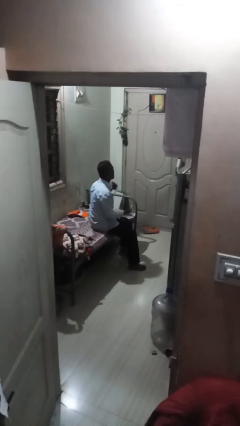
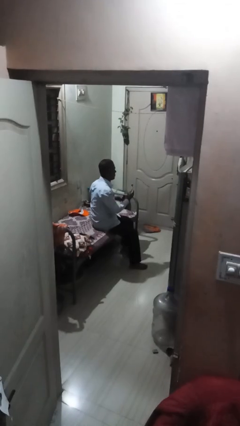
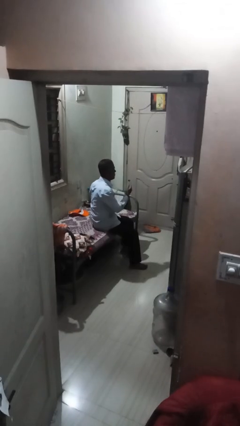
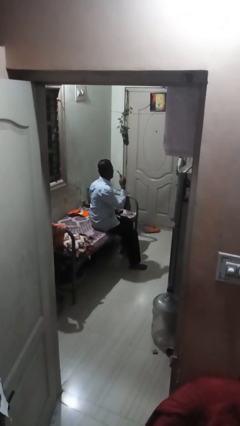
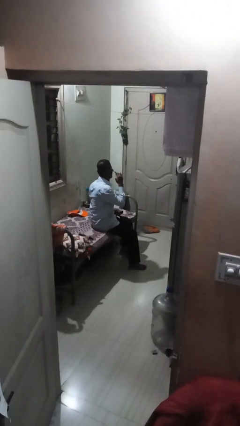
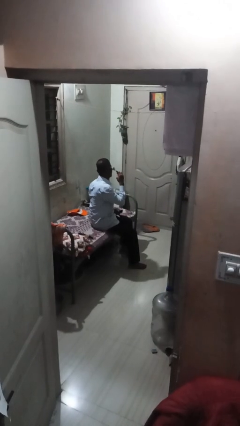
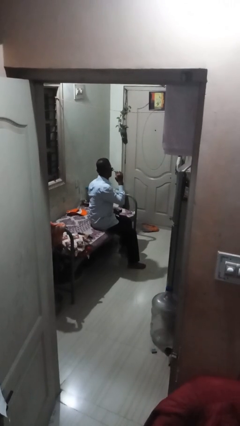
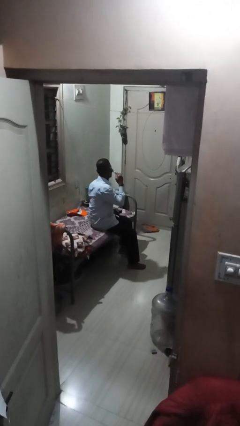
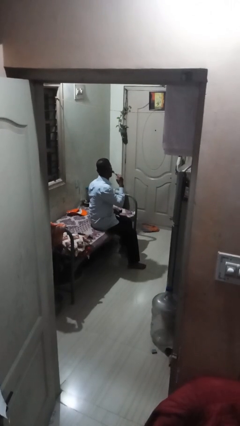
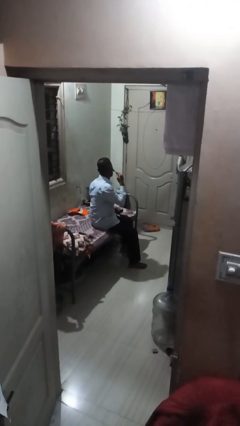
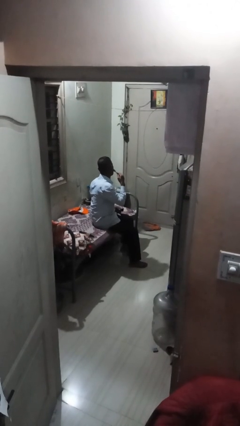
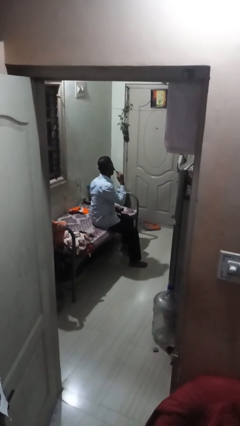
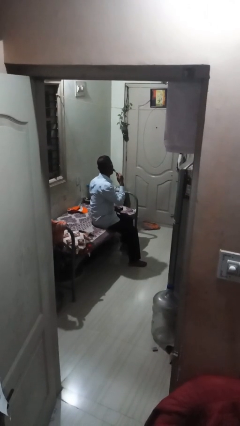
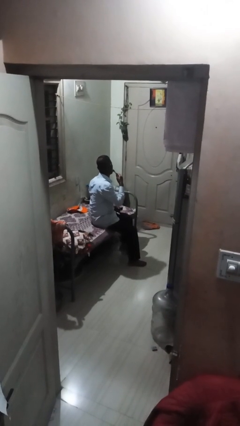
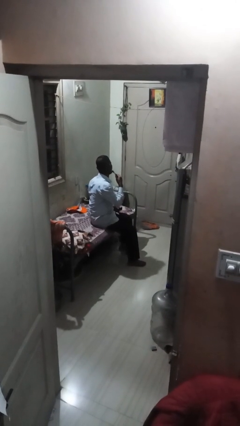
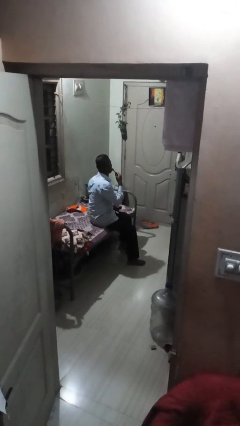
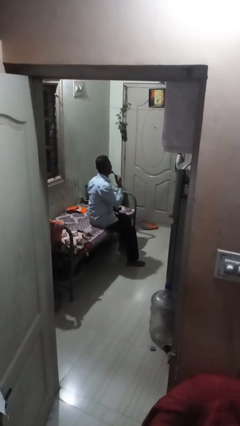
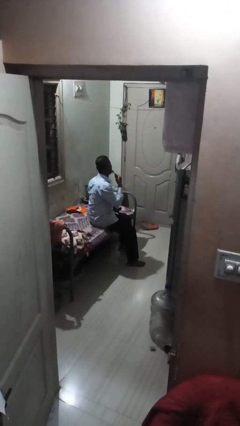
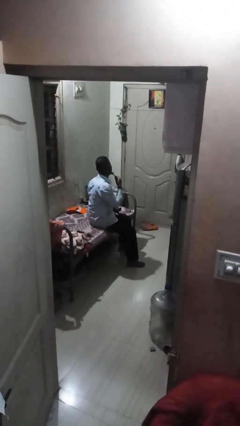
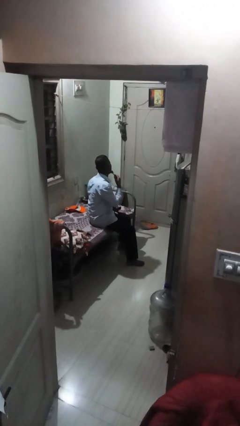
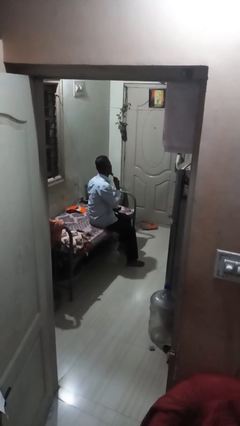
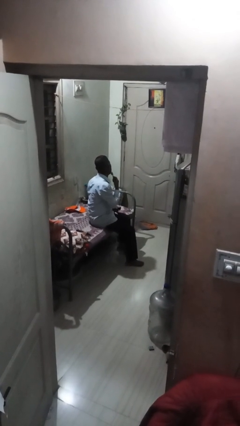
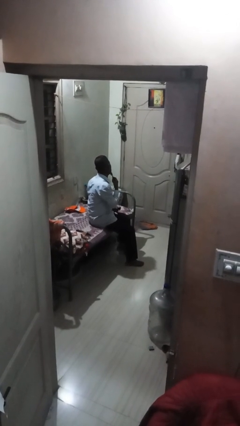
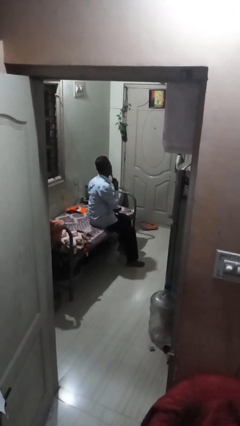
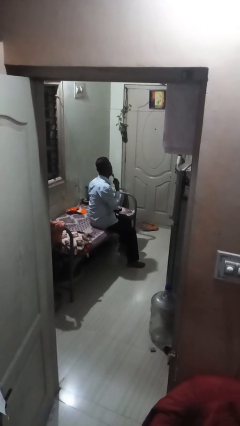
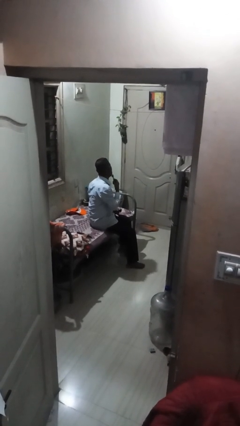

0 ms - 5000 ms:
person shaves face

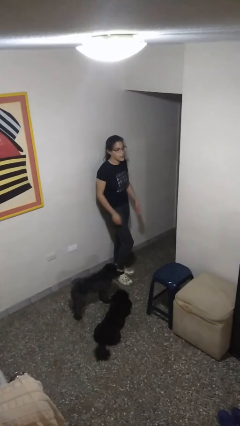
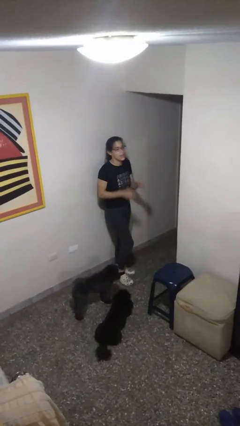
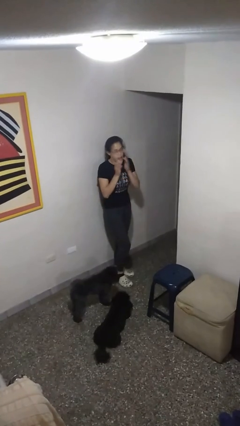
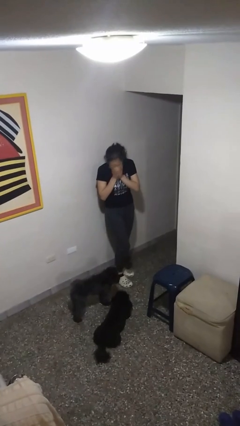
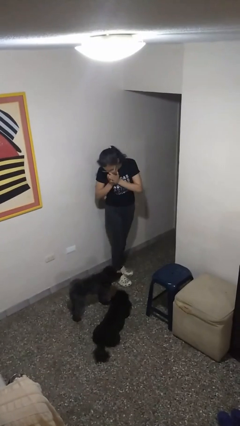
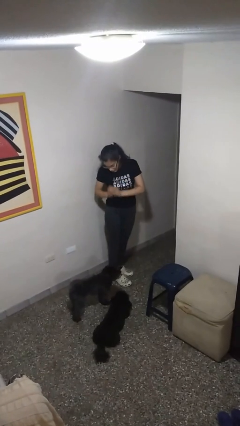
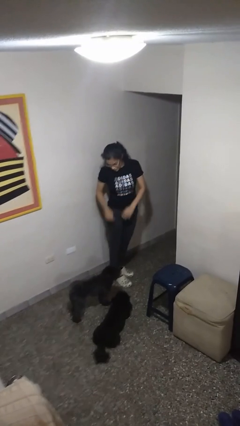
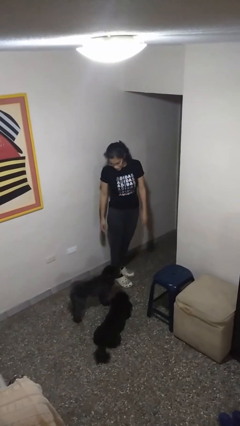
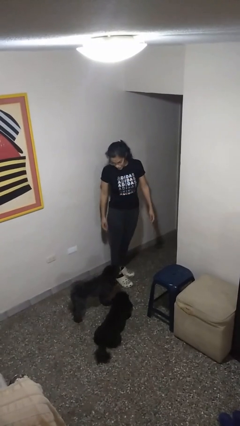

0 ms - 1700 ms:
person sneezes into hand

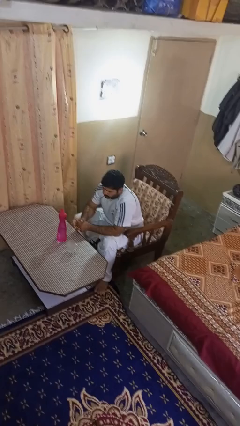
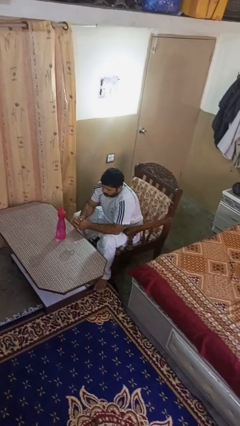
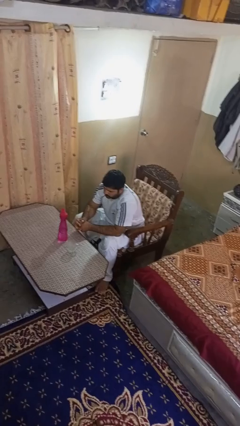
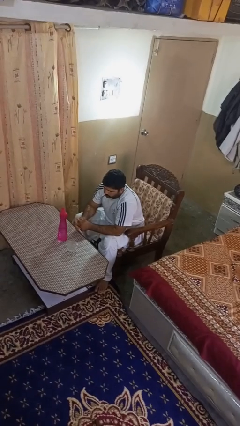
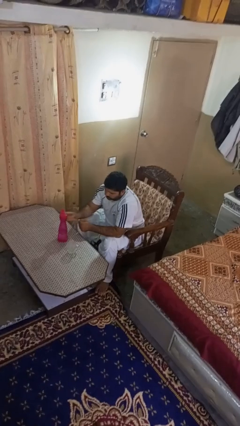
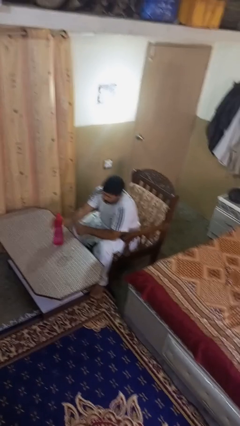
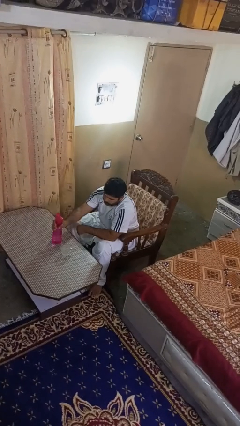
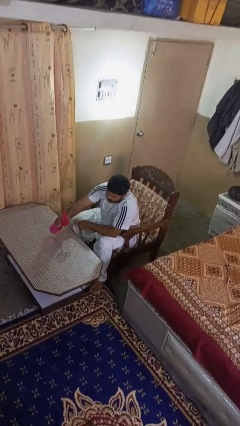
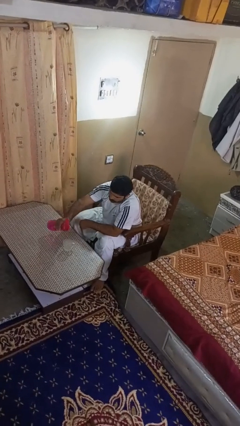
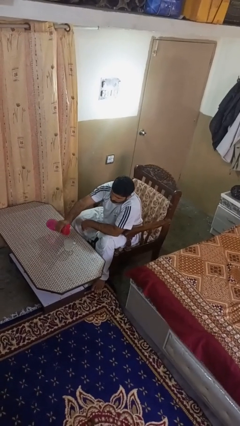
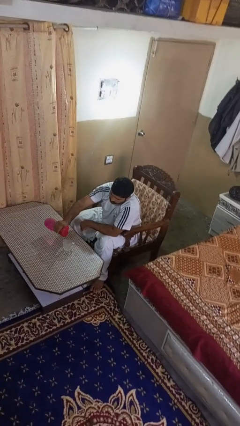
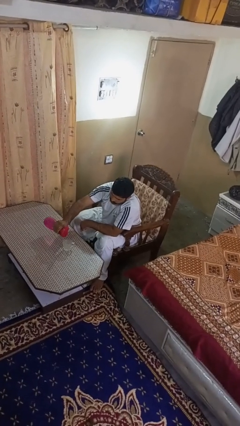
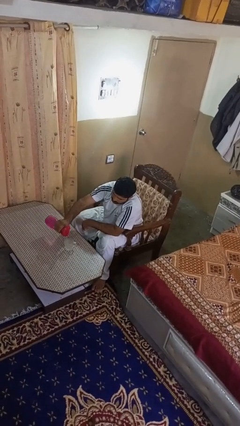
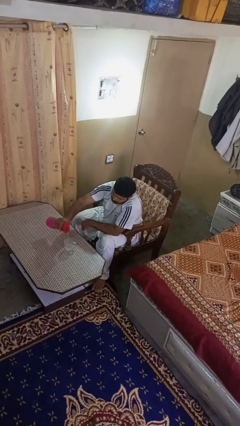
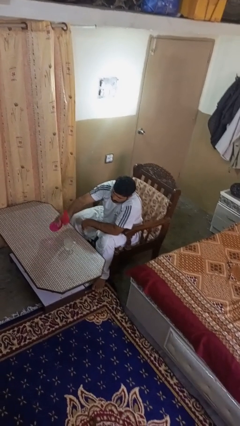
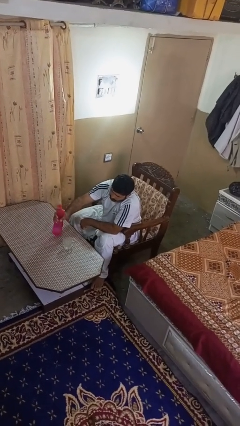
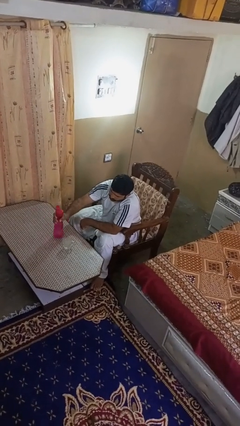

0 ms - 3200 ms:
person pours liquid into cup

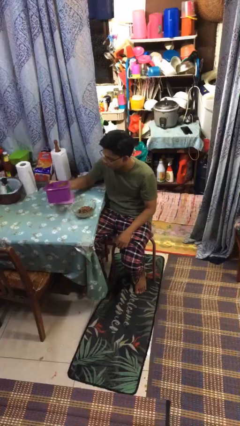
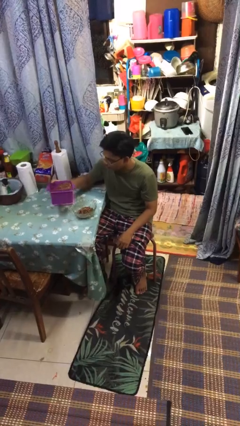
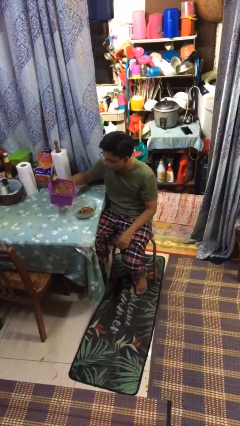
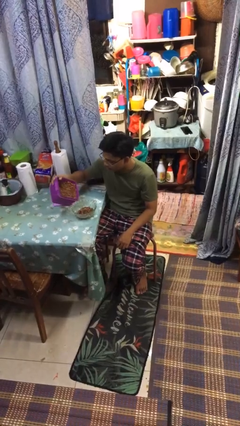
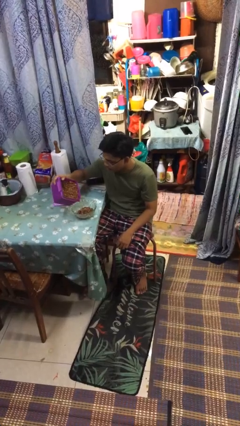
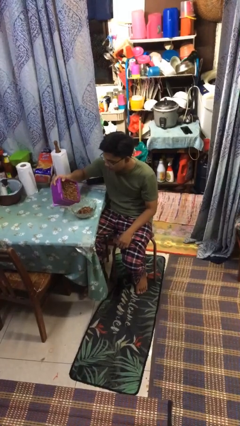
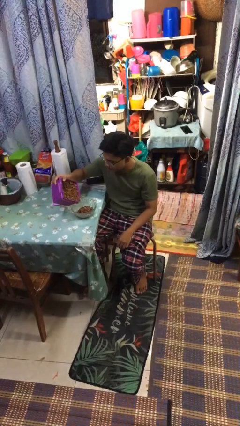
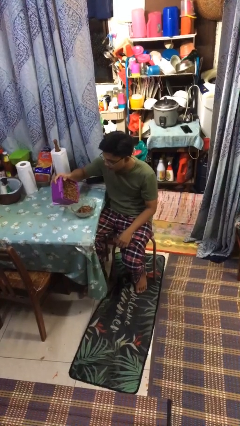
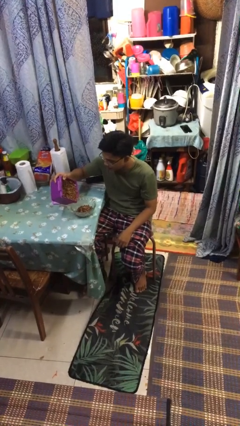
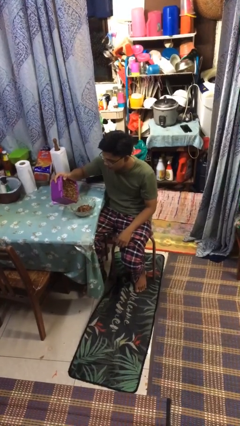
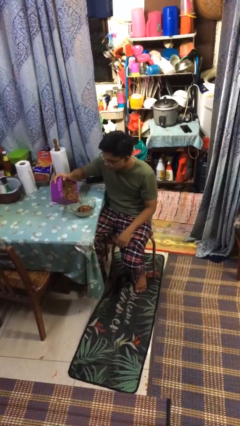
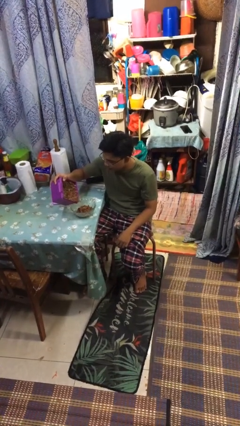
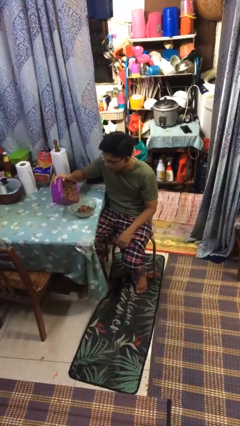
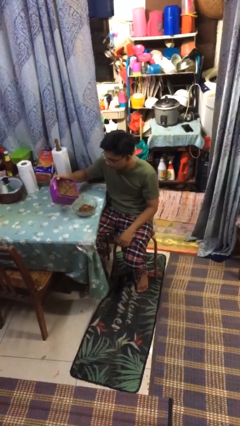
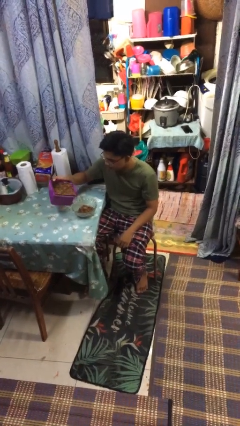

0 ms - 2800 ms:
person pours into bowl

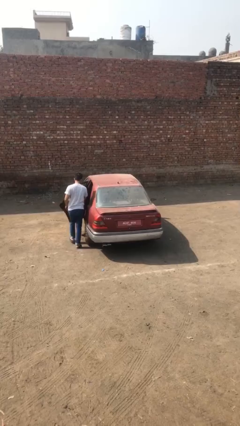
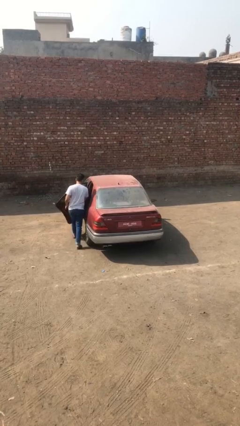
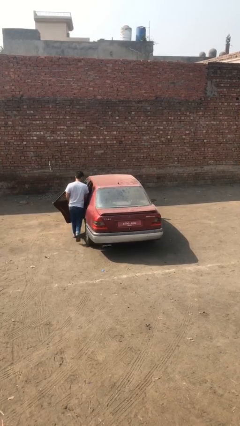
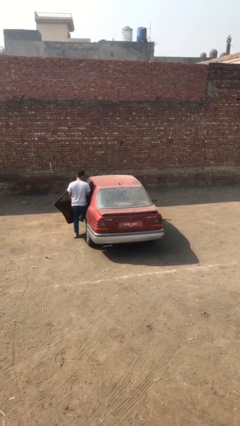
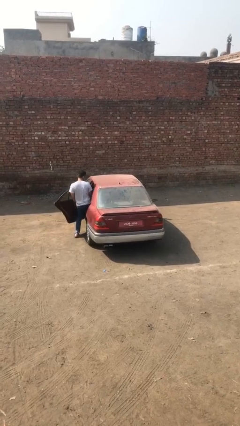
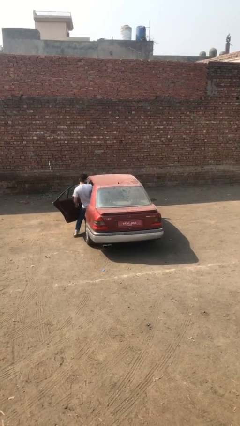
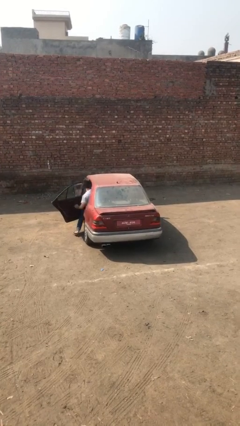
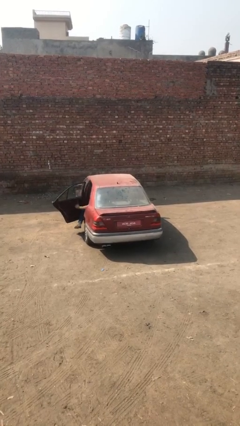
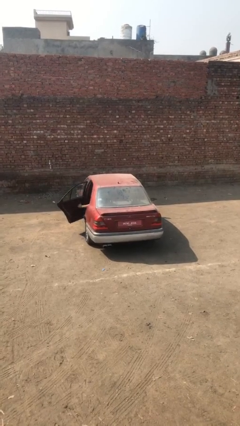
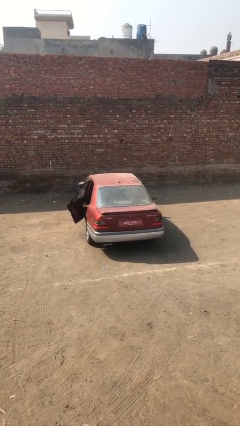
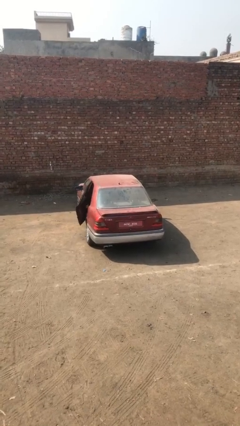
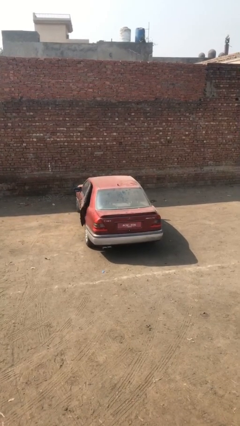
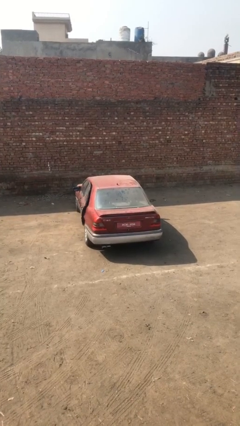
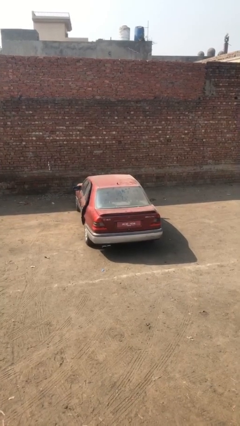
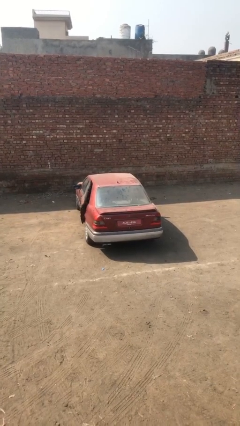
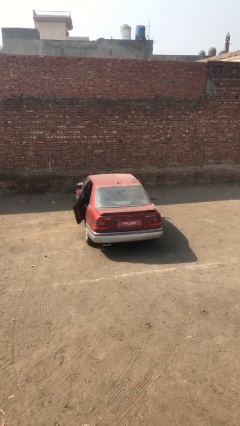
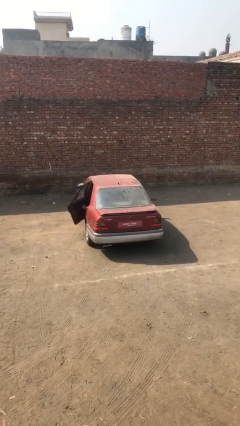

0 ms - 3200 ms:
car picks up person

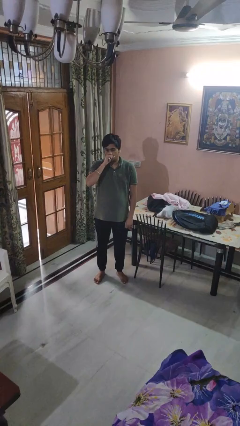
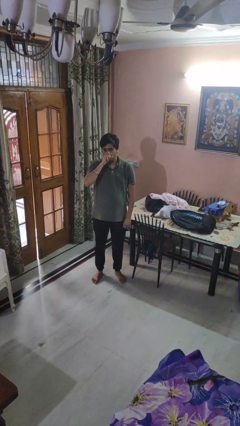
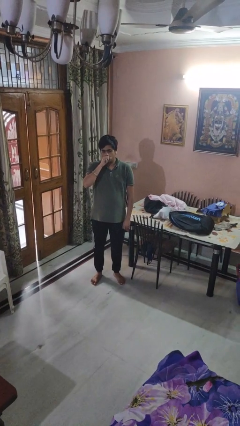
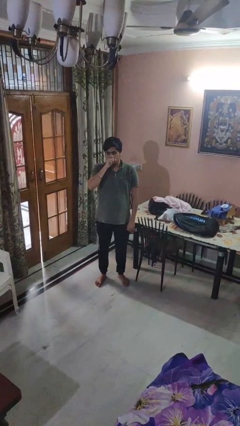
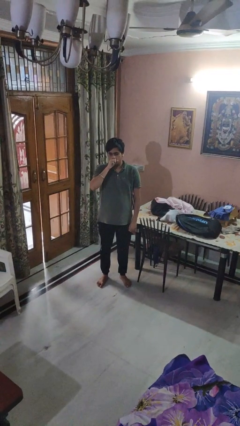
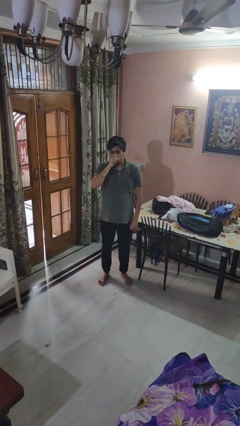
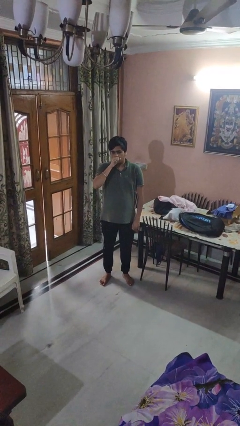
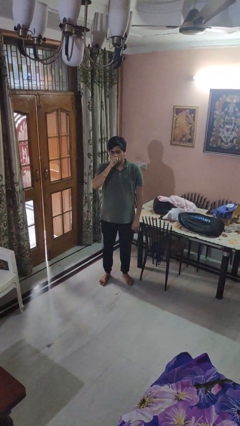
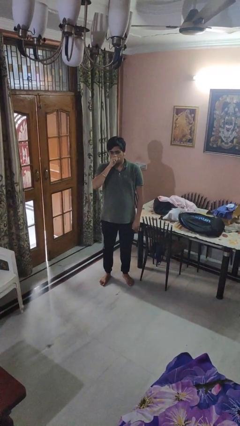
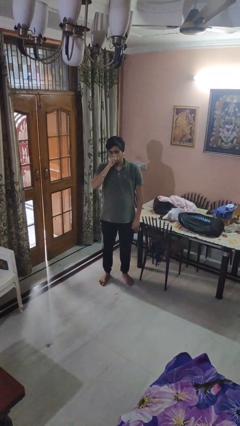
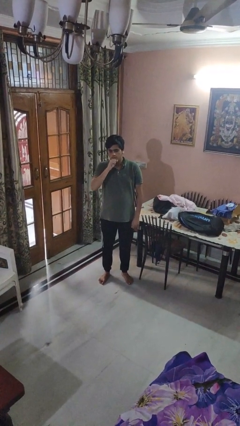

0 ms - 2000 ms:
person vapes
